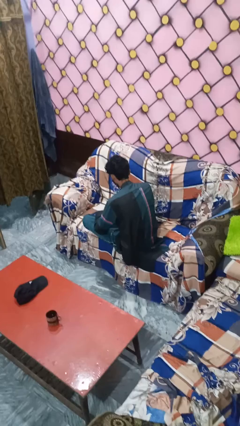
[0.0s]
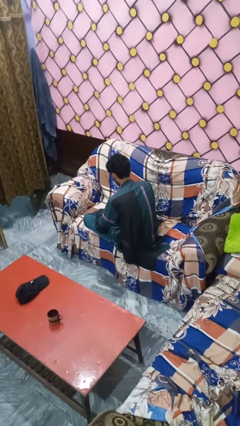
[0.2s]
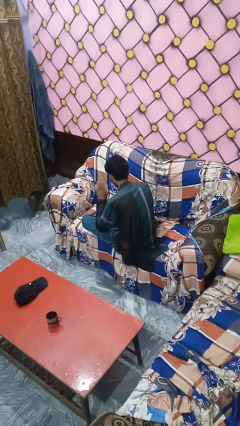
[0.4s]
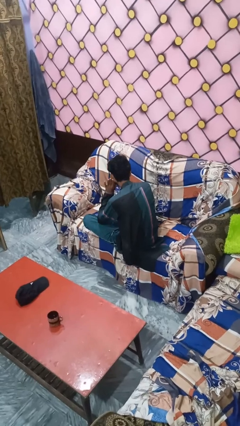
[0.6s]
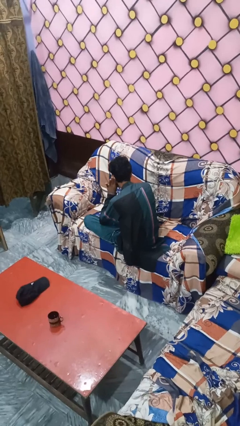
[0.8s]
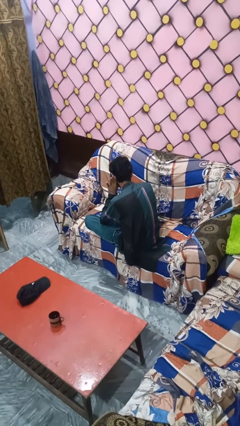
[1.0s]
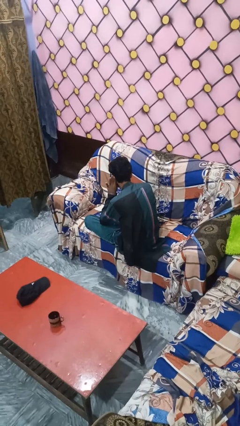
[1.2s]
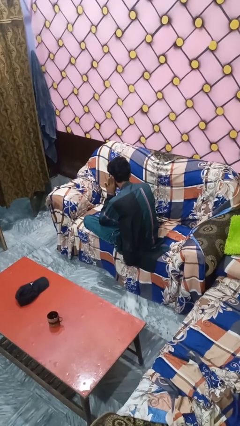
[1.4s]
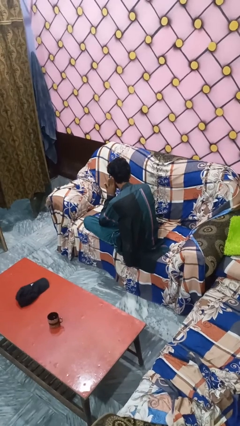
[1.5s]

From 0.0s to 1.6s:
person gestures listen closely

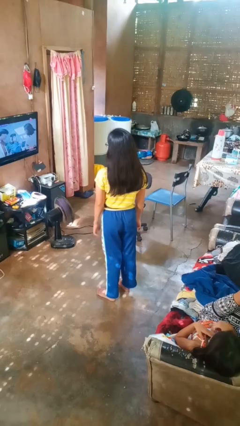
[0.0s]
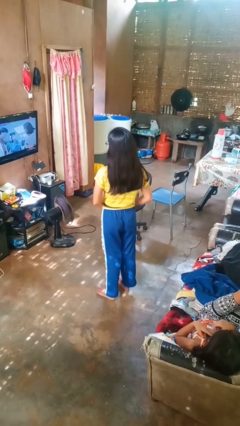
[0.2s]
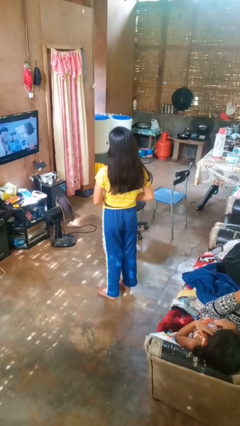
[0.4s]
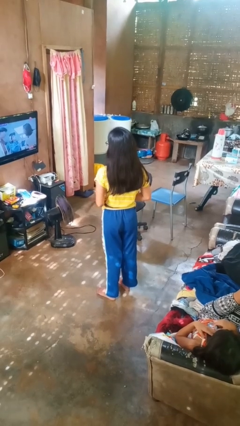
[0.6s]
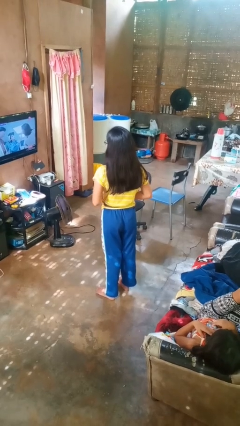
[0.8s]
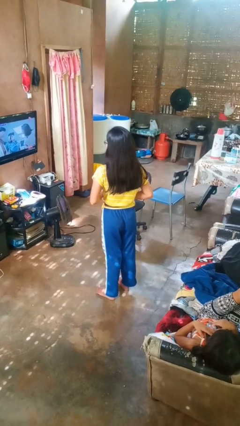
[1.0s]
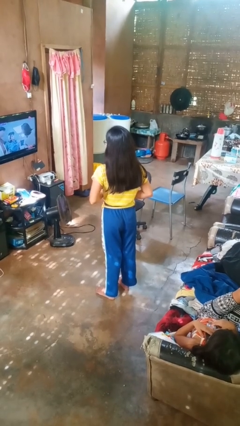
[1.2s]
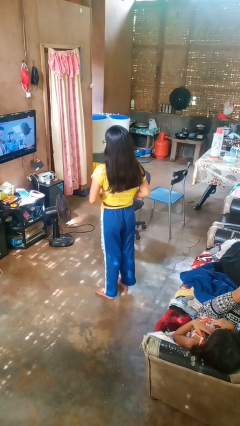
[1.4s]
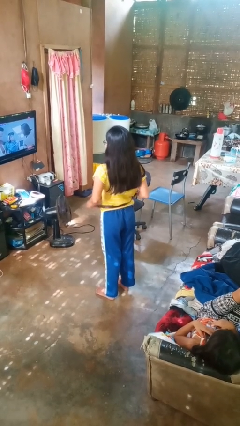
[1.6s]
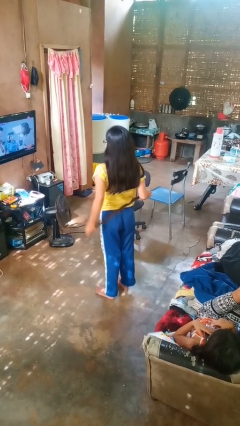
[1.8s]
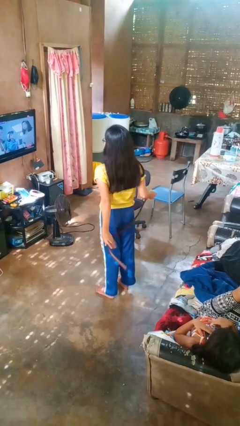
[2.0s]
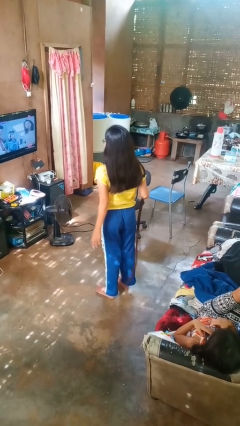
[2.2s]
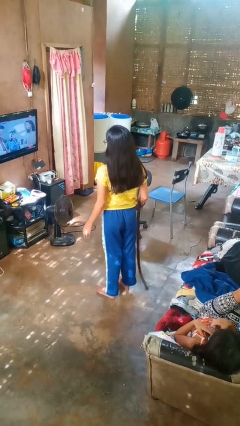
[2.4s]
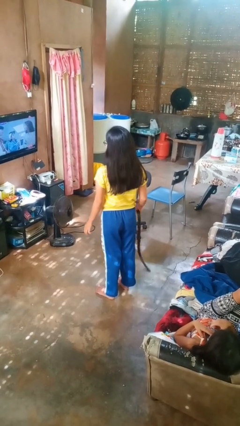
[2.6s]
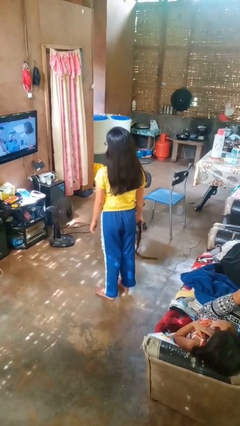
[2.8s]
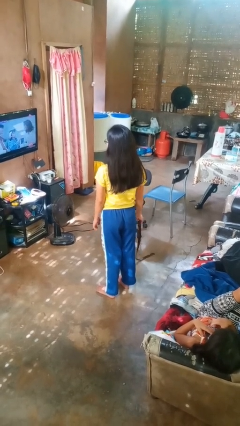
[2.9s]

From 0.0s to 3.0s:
person takes off belt

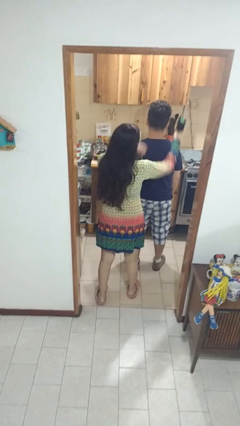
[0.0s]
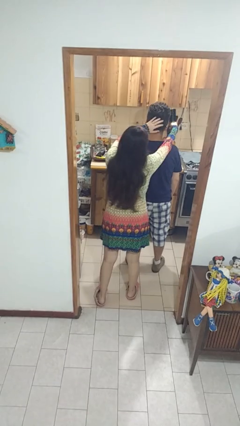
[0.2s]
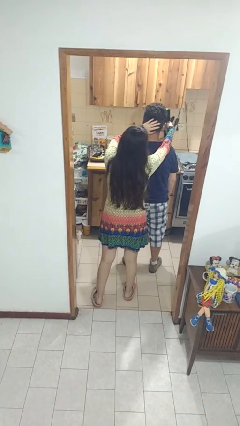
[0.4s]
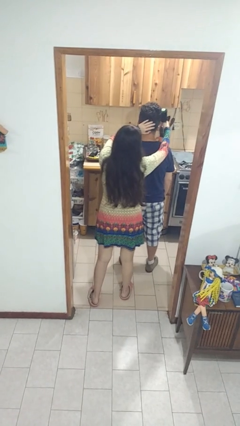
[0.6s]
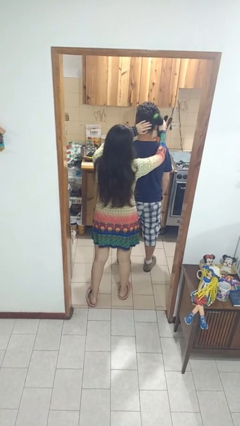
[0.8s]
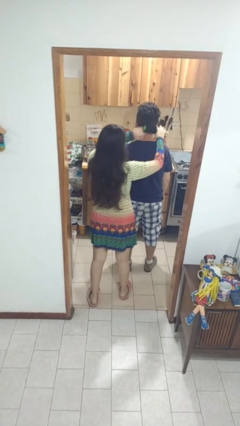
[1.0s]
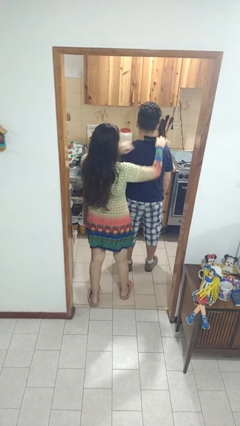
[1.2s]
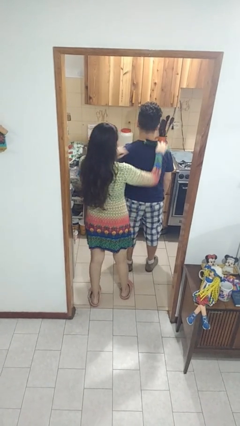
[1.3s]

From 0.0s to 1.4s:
person brushes hair of person

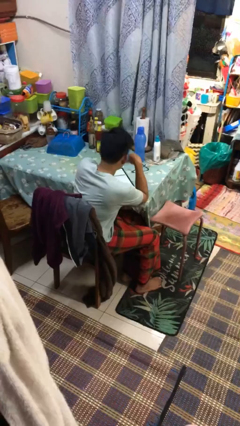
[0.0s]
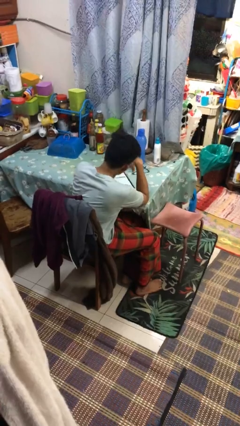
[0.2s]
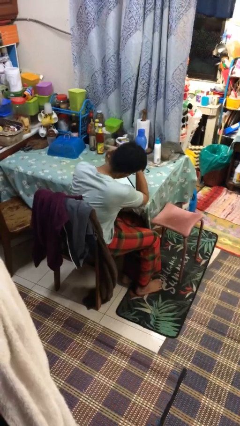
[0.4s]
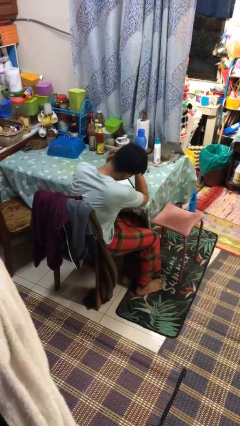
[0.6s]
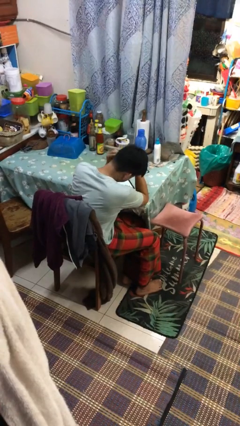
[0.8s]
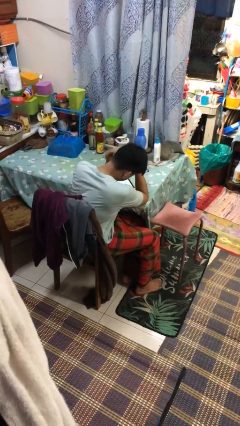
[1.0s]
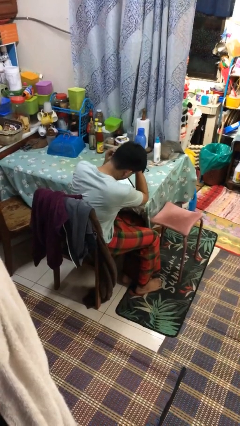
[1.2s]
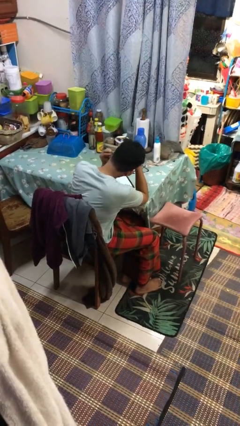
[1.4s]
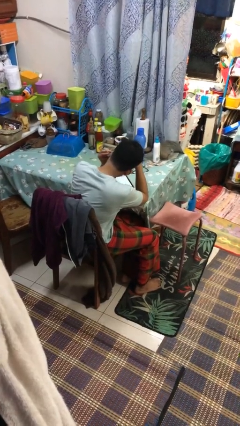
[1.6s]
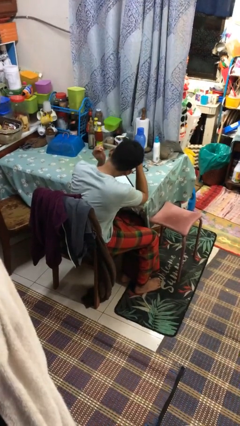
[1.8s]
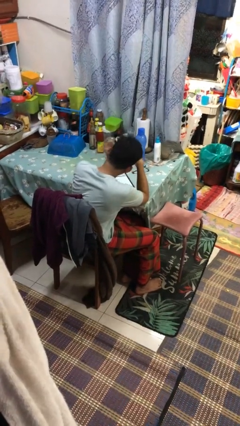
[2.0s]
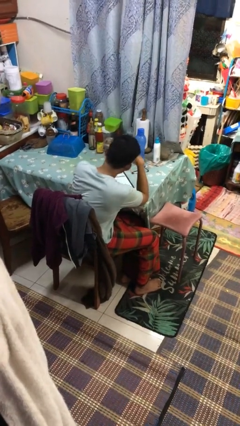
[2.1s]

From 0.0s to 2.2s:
person touches earlobe

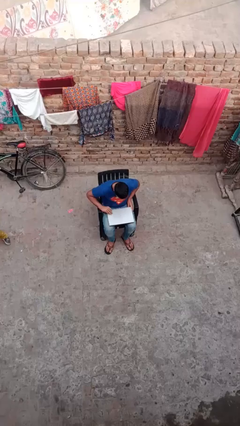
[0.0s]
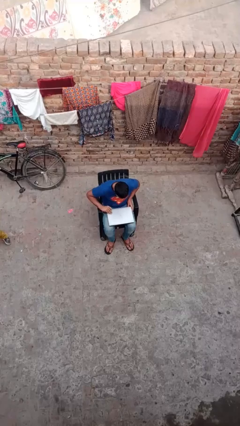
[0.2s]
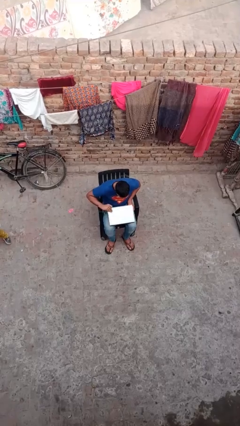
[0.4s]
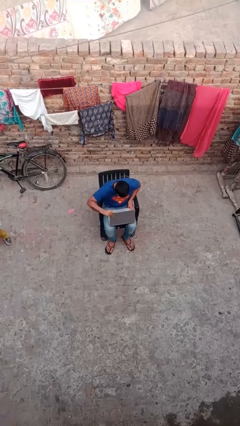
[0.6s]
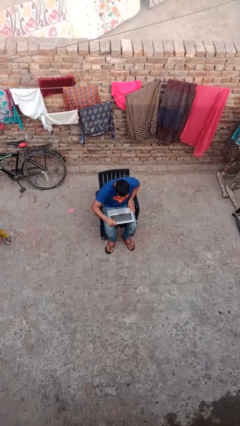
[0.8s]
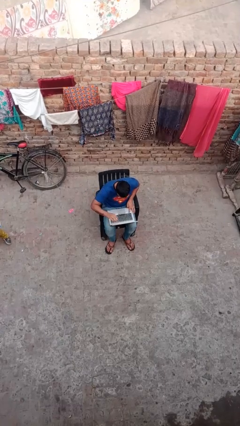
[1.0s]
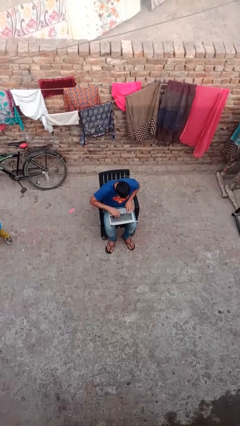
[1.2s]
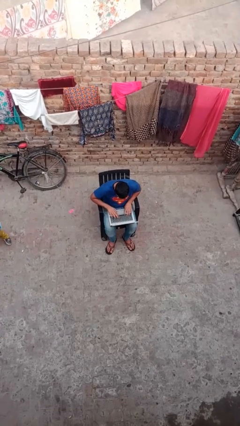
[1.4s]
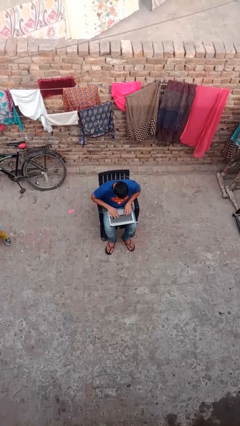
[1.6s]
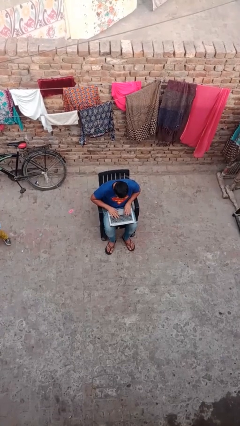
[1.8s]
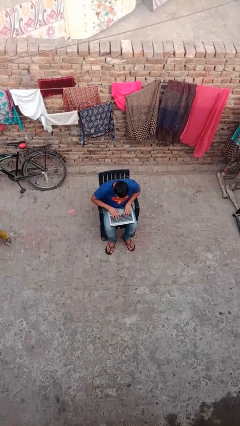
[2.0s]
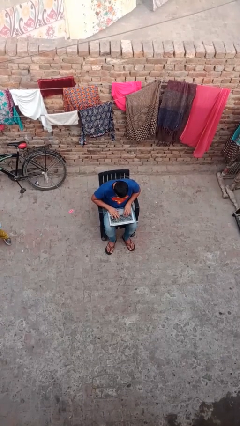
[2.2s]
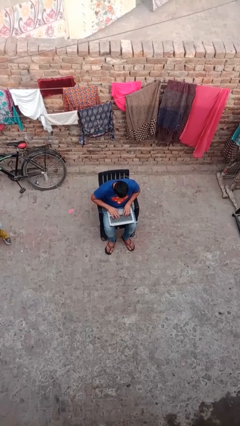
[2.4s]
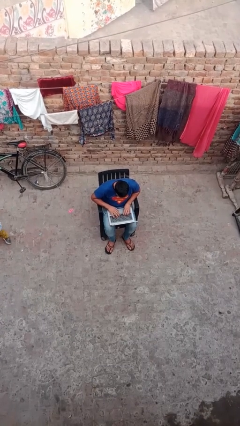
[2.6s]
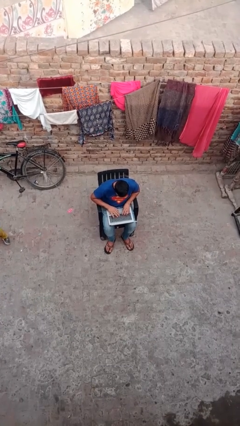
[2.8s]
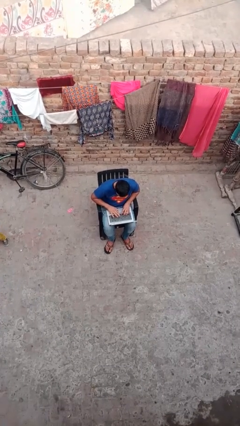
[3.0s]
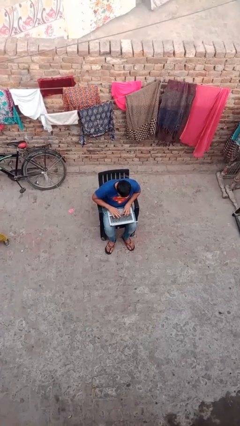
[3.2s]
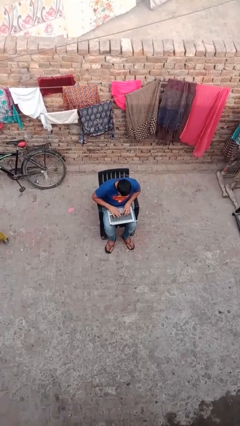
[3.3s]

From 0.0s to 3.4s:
person interacts with laptop

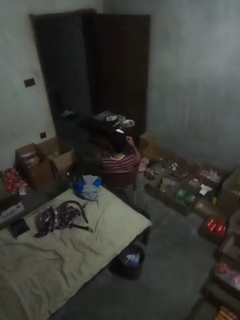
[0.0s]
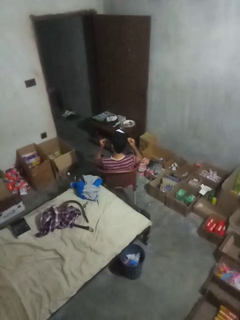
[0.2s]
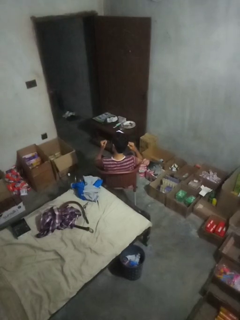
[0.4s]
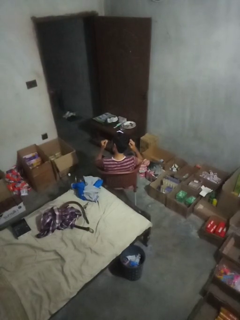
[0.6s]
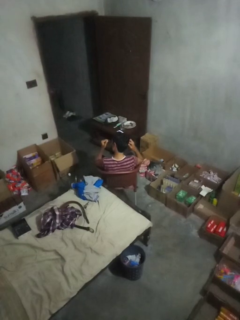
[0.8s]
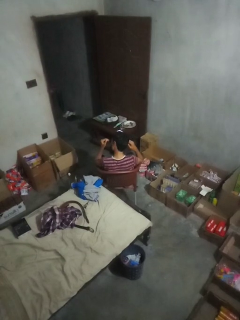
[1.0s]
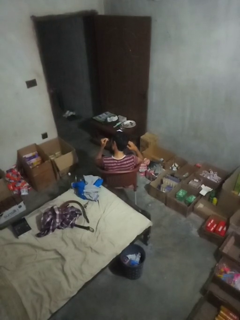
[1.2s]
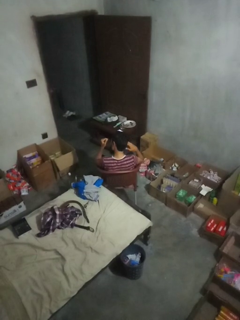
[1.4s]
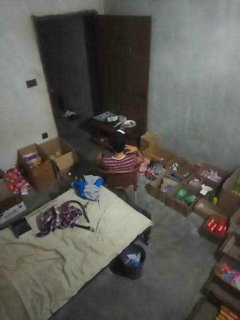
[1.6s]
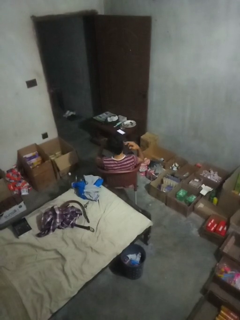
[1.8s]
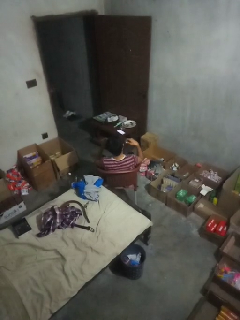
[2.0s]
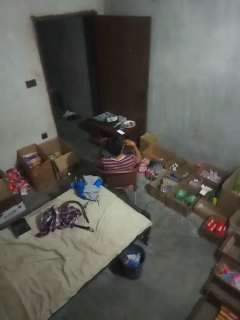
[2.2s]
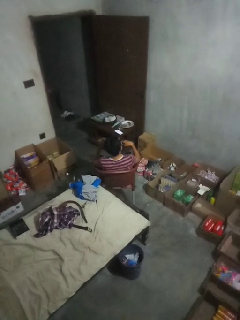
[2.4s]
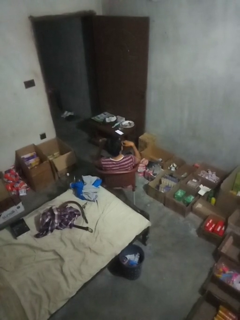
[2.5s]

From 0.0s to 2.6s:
person puts on earrings

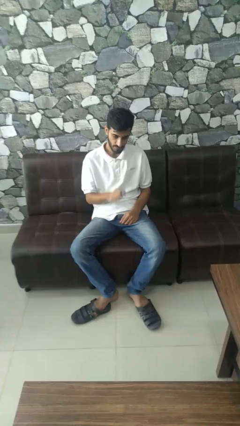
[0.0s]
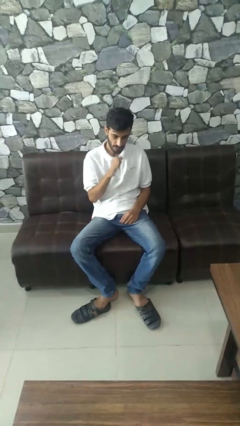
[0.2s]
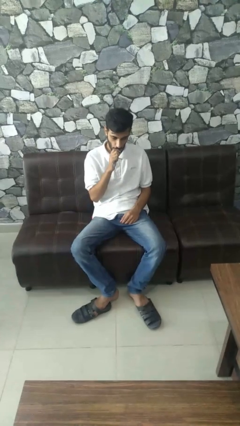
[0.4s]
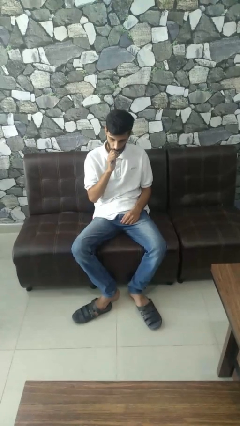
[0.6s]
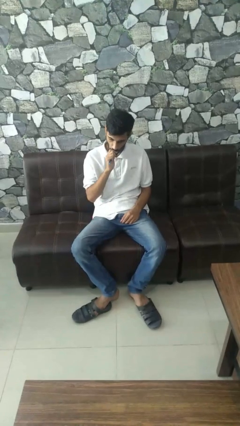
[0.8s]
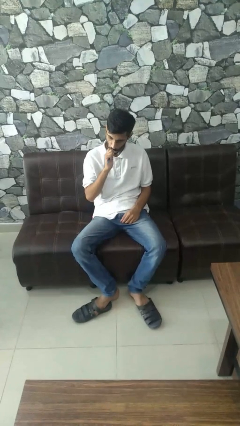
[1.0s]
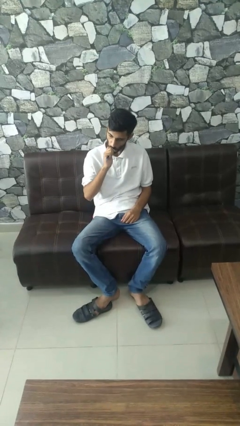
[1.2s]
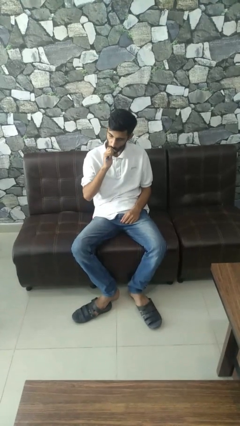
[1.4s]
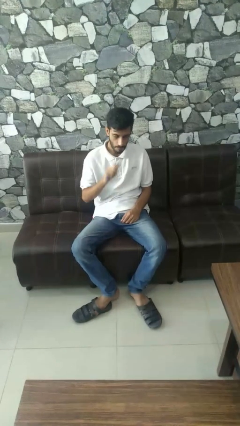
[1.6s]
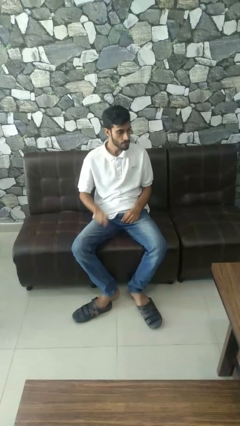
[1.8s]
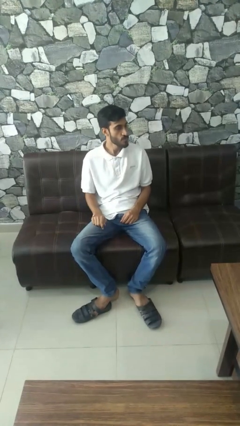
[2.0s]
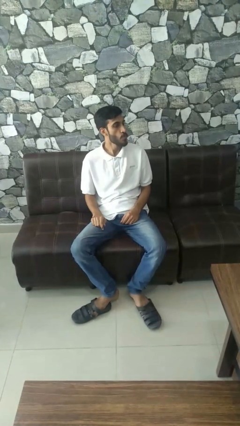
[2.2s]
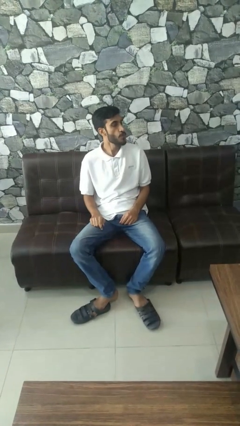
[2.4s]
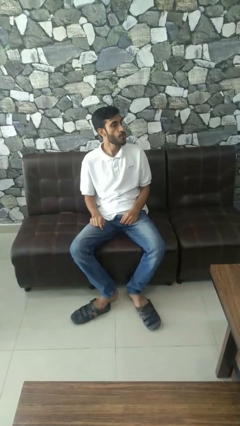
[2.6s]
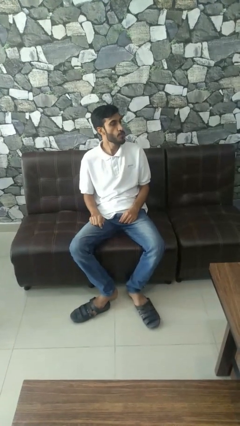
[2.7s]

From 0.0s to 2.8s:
person vapes

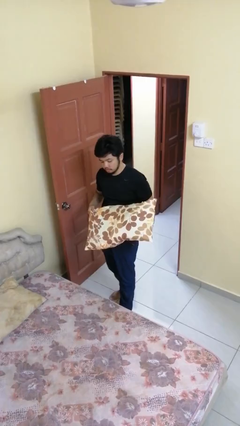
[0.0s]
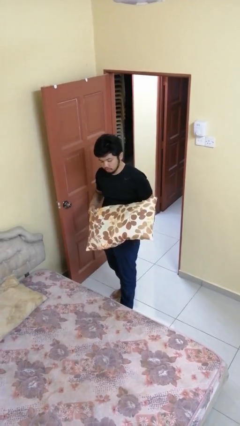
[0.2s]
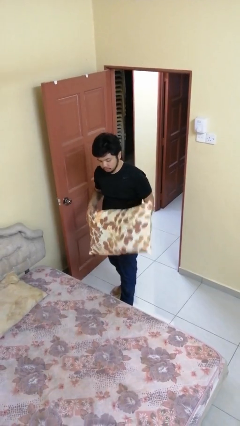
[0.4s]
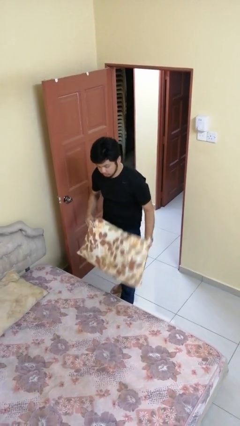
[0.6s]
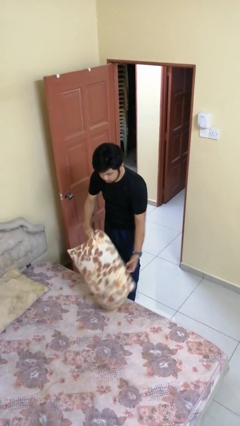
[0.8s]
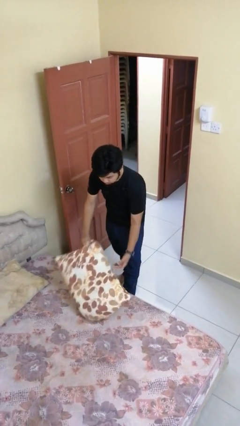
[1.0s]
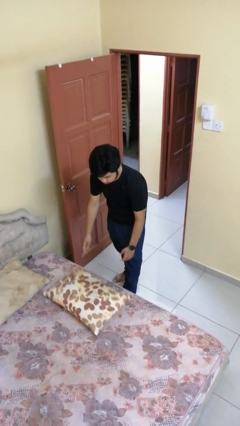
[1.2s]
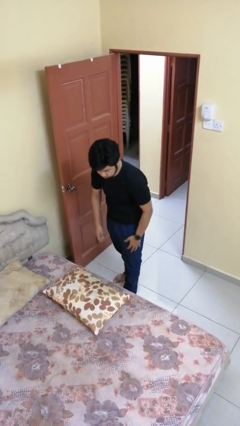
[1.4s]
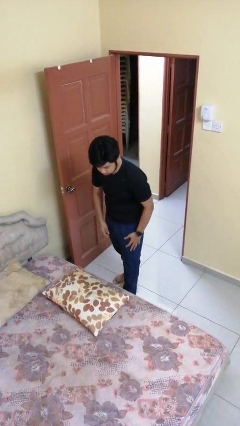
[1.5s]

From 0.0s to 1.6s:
person puts down object on bed
